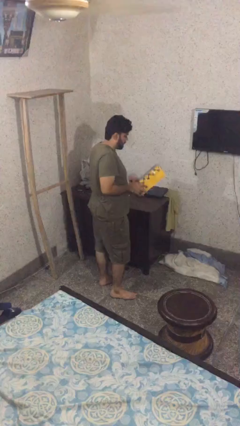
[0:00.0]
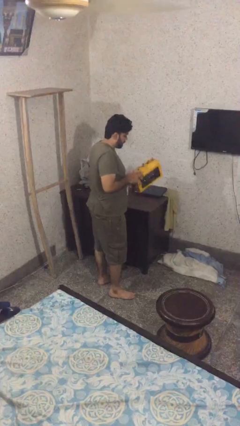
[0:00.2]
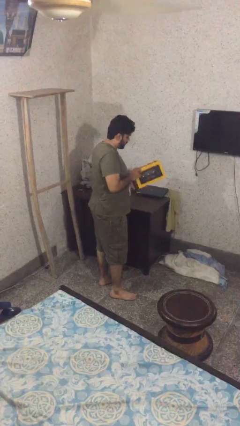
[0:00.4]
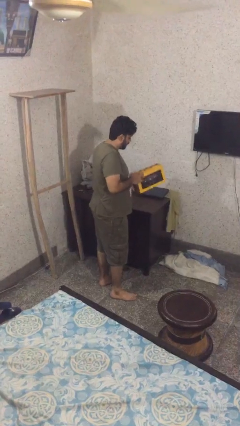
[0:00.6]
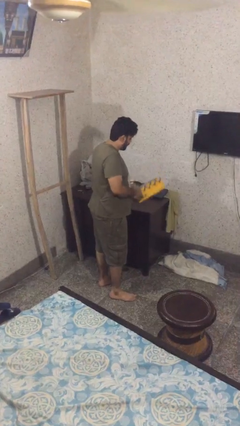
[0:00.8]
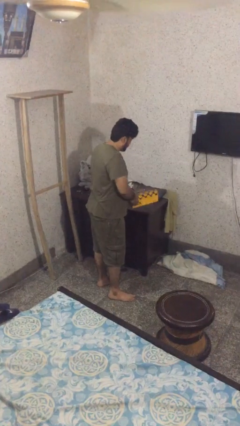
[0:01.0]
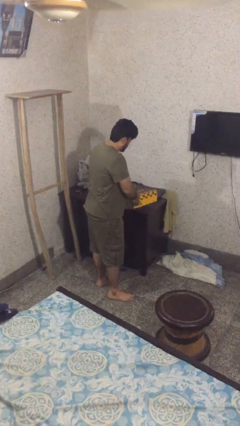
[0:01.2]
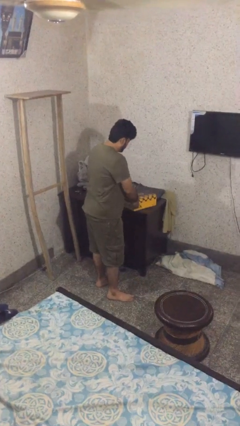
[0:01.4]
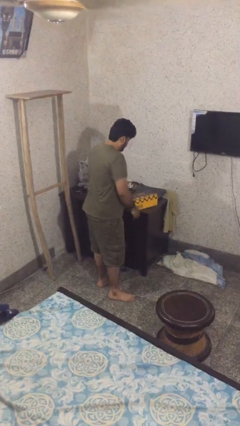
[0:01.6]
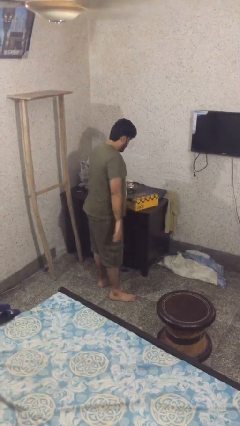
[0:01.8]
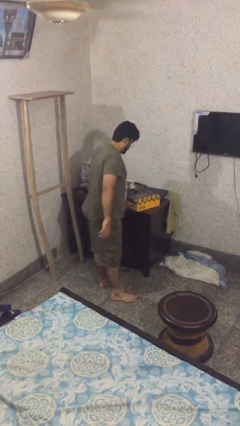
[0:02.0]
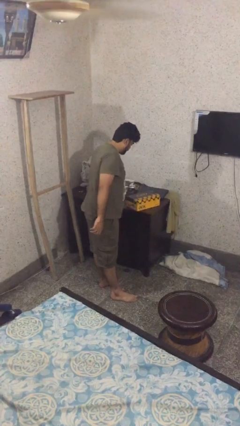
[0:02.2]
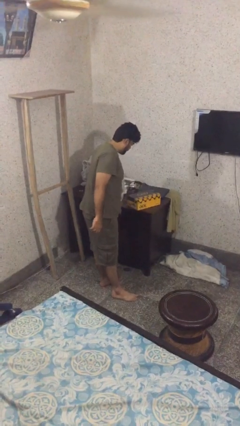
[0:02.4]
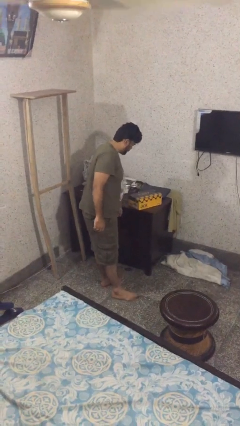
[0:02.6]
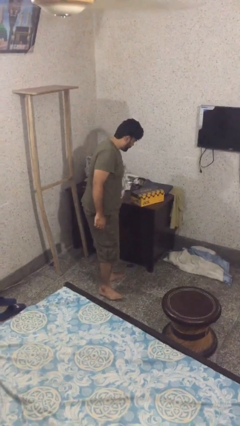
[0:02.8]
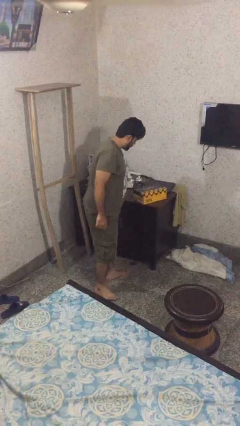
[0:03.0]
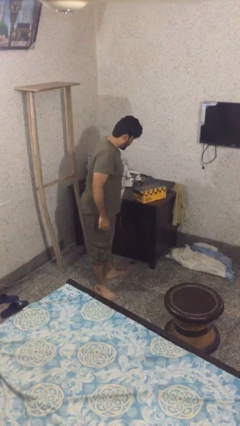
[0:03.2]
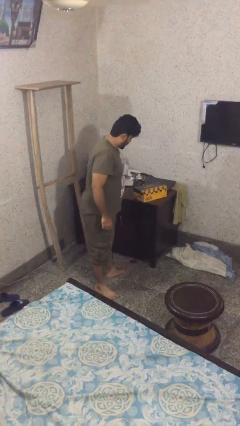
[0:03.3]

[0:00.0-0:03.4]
person puts down object on table

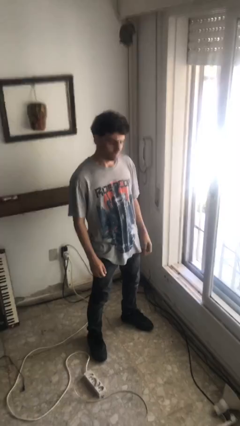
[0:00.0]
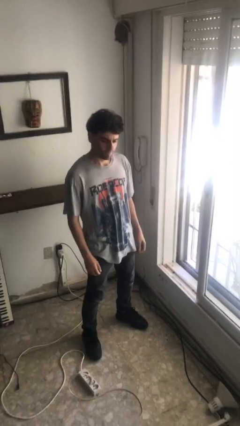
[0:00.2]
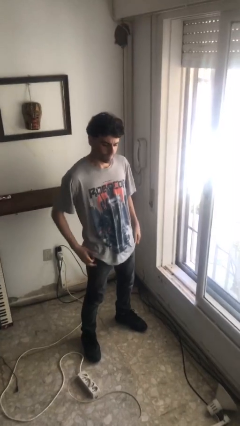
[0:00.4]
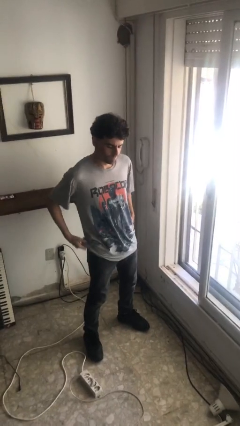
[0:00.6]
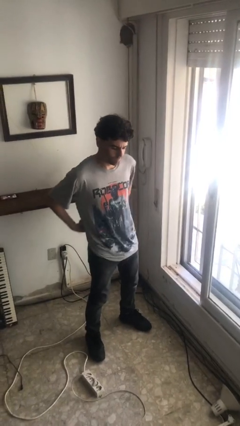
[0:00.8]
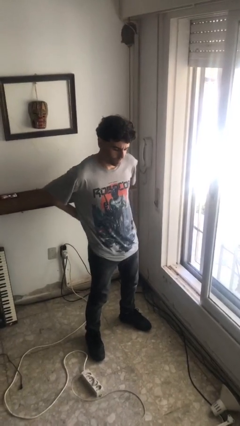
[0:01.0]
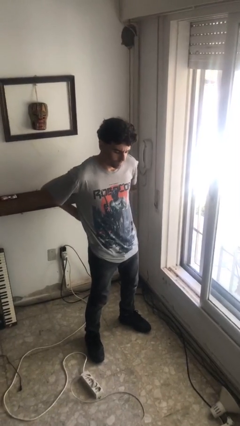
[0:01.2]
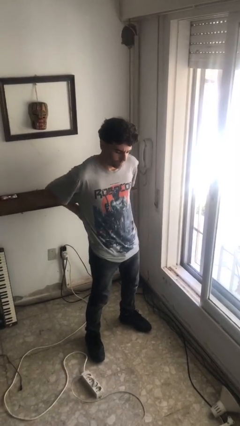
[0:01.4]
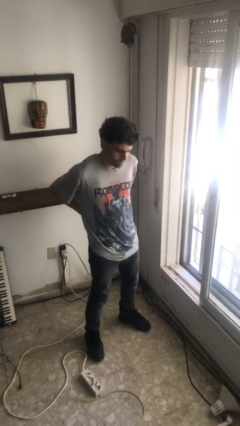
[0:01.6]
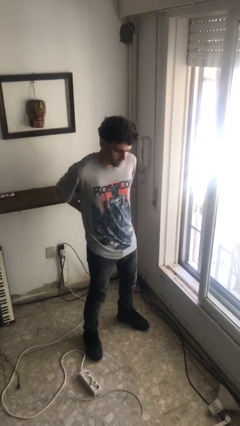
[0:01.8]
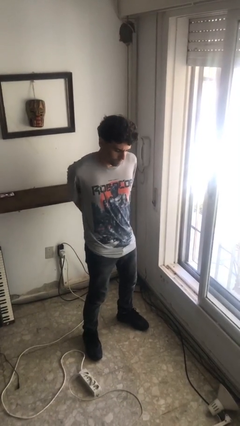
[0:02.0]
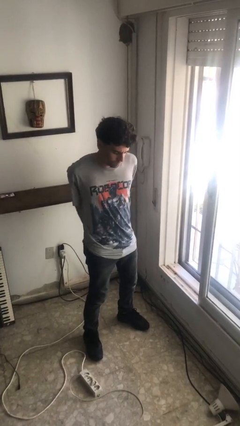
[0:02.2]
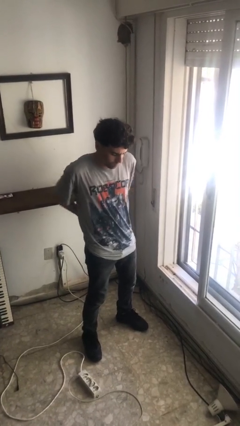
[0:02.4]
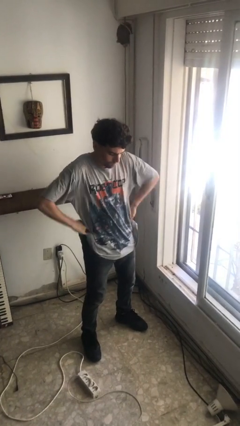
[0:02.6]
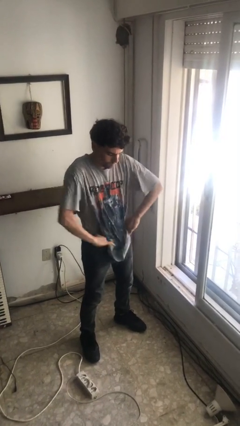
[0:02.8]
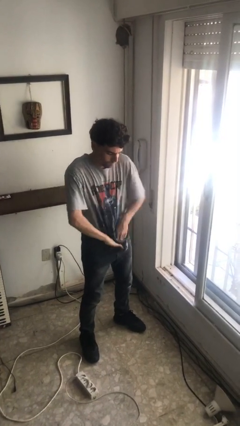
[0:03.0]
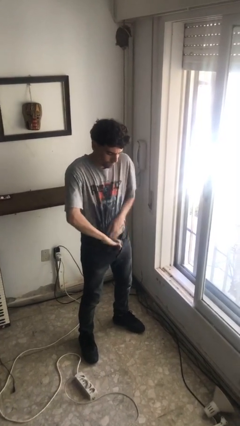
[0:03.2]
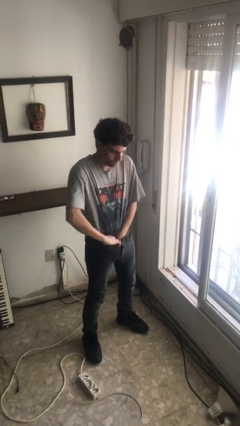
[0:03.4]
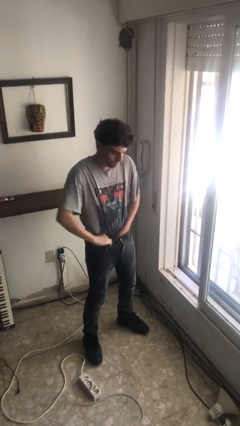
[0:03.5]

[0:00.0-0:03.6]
person tucks in shirt

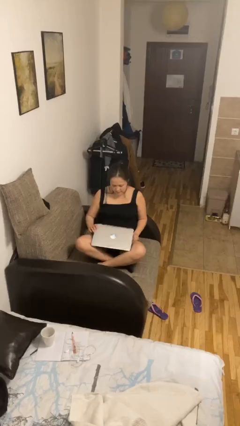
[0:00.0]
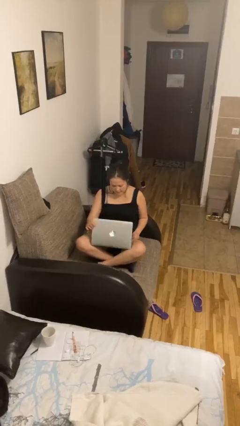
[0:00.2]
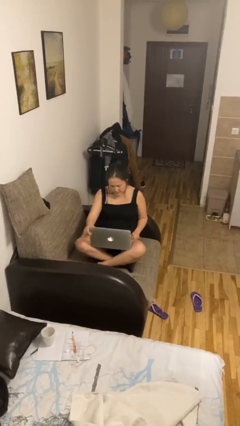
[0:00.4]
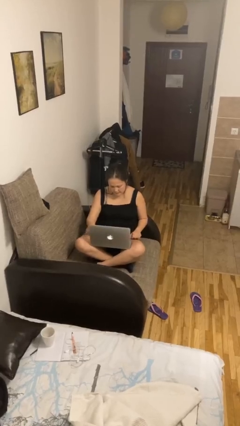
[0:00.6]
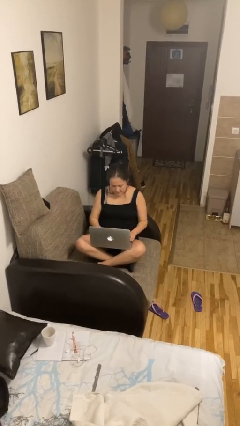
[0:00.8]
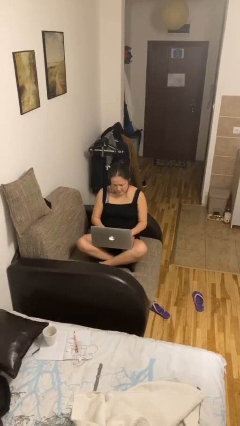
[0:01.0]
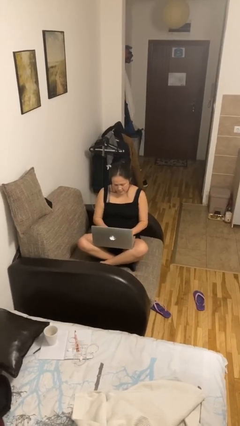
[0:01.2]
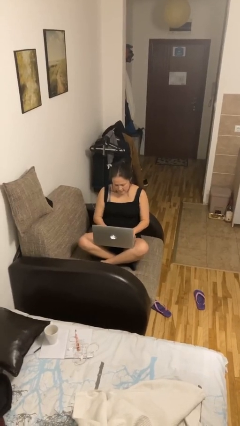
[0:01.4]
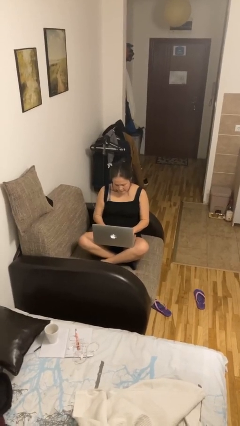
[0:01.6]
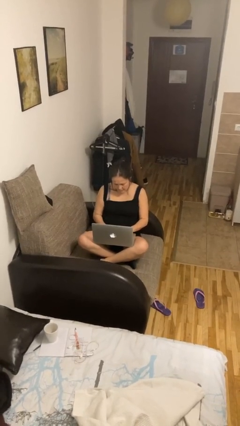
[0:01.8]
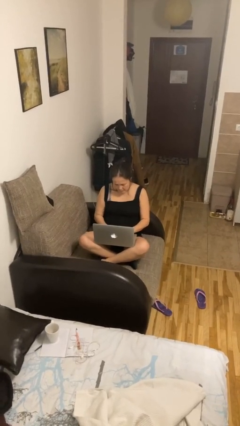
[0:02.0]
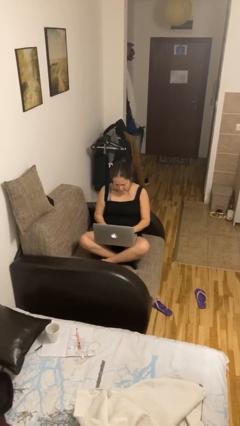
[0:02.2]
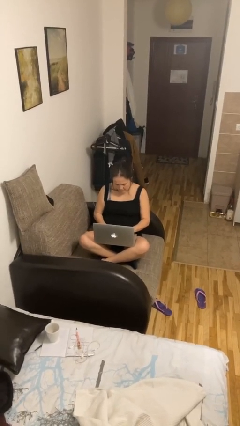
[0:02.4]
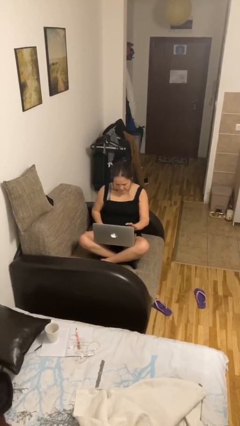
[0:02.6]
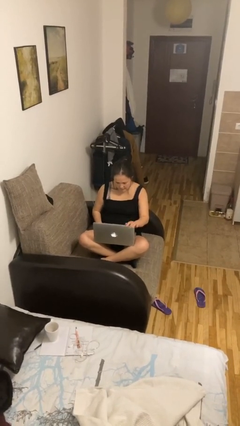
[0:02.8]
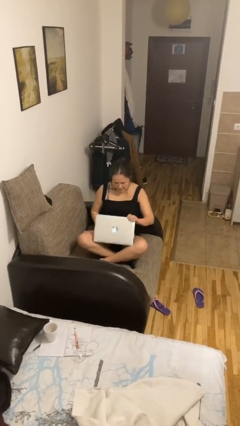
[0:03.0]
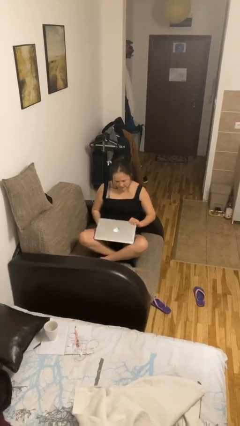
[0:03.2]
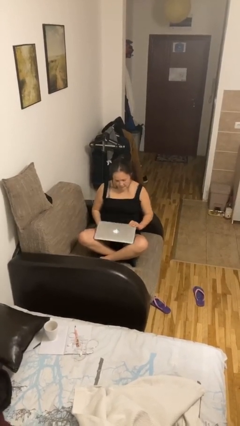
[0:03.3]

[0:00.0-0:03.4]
person interacts with laptop

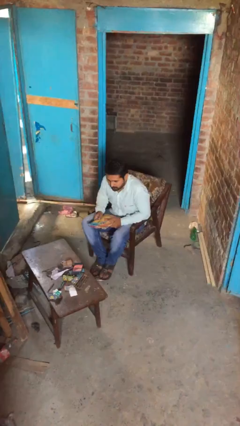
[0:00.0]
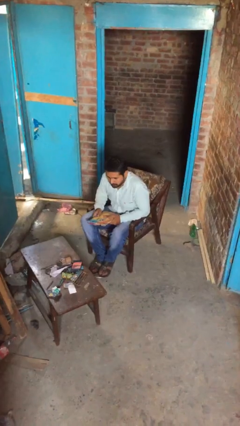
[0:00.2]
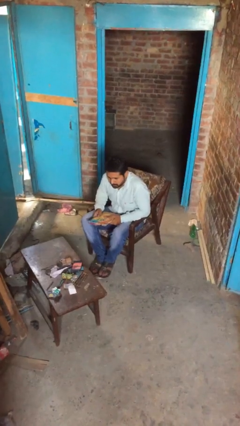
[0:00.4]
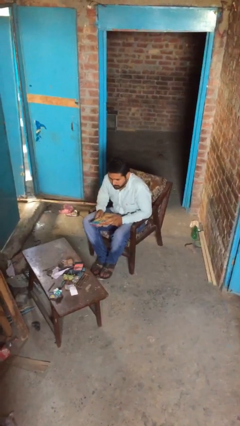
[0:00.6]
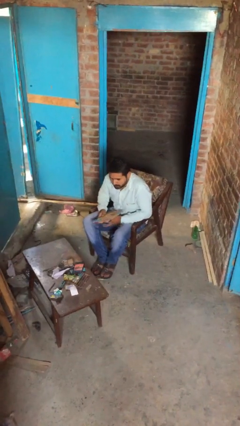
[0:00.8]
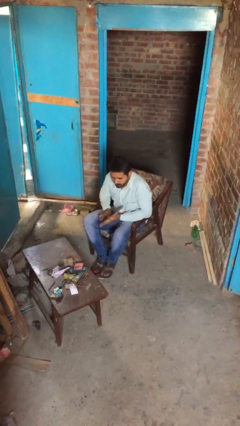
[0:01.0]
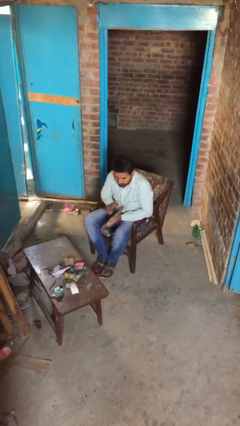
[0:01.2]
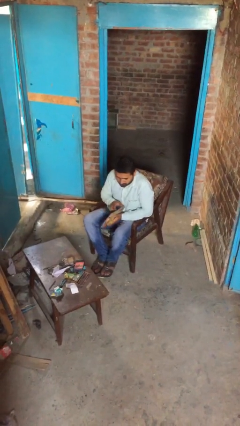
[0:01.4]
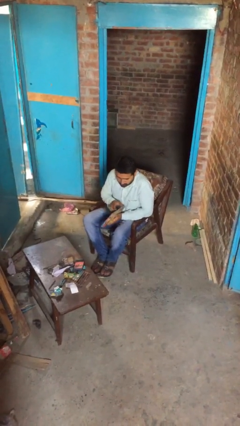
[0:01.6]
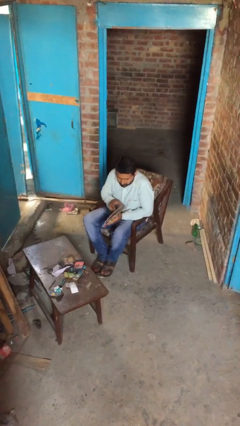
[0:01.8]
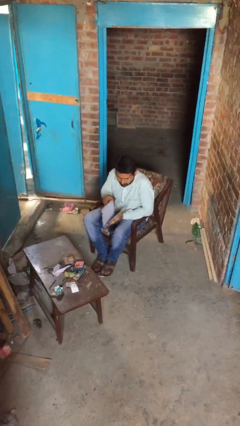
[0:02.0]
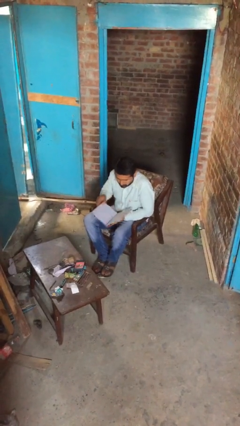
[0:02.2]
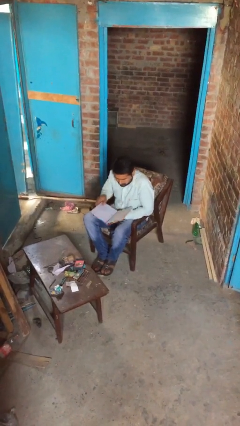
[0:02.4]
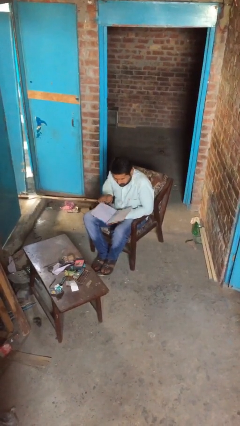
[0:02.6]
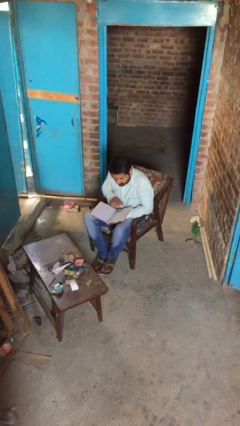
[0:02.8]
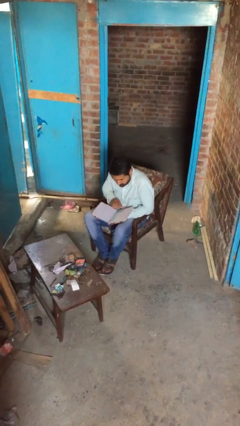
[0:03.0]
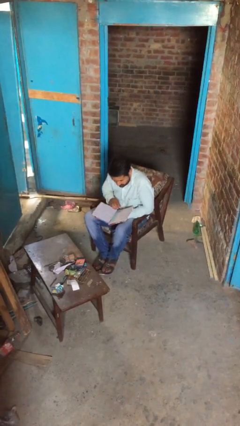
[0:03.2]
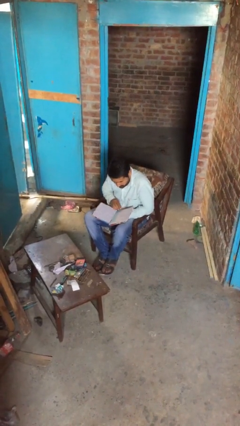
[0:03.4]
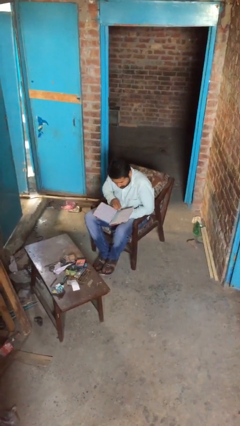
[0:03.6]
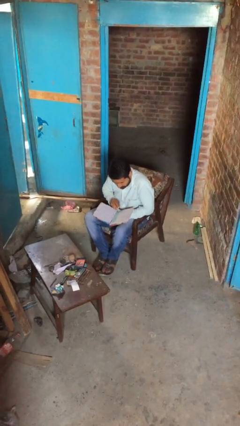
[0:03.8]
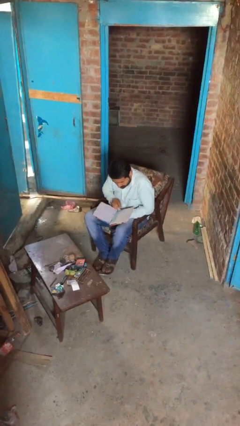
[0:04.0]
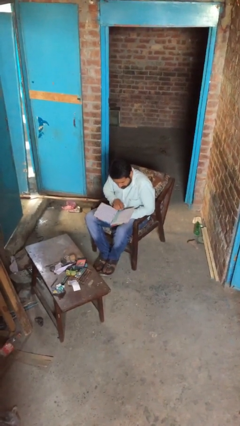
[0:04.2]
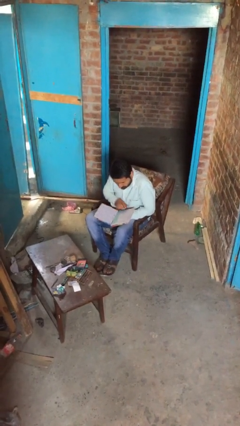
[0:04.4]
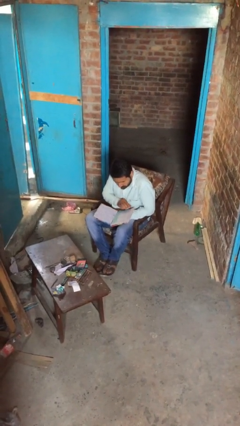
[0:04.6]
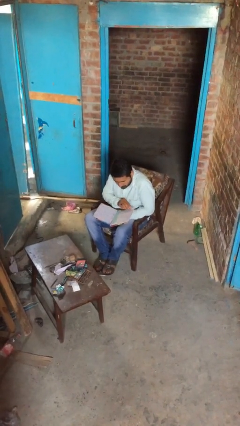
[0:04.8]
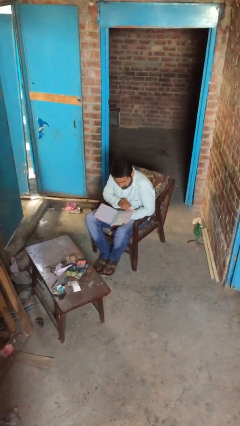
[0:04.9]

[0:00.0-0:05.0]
person reads document

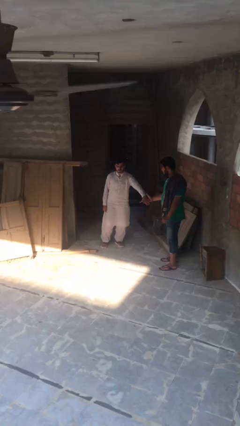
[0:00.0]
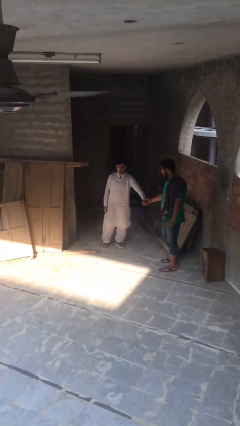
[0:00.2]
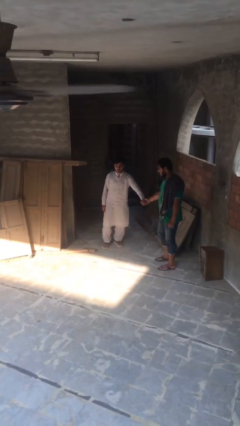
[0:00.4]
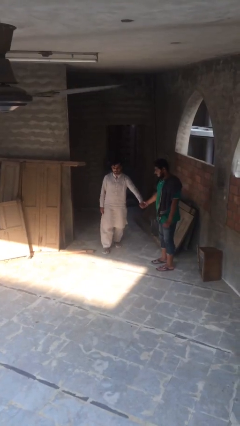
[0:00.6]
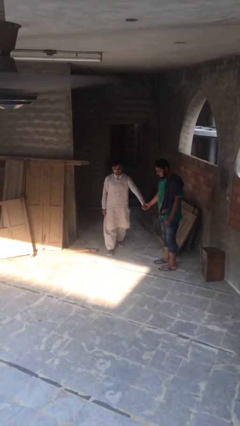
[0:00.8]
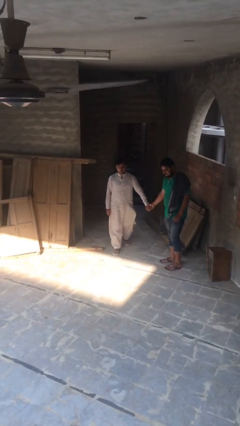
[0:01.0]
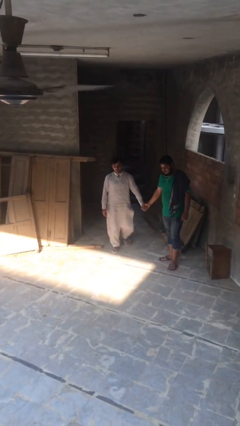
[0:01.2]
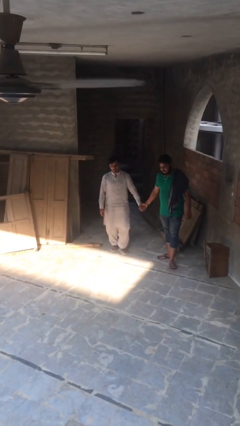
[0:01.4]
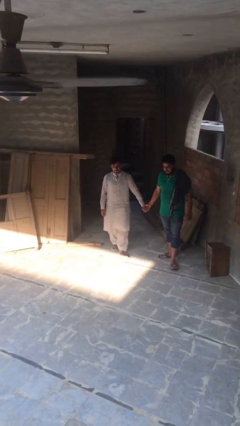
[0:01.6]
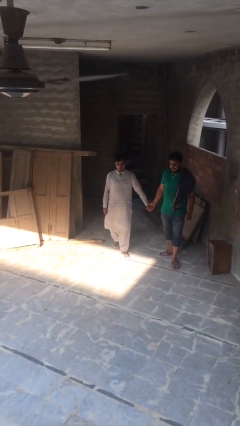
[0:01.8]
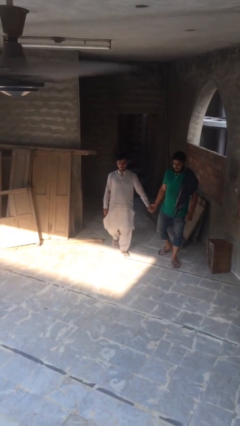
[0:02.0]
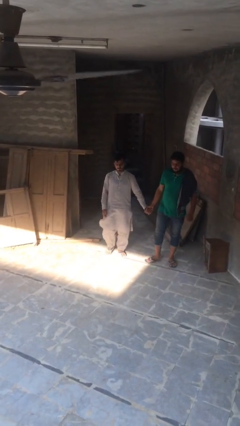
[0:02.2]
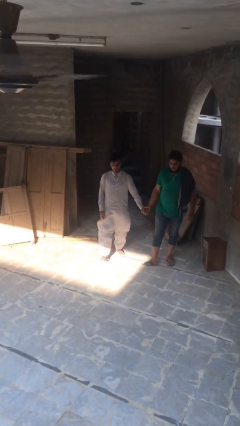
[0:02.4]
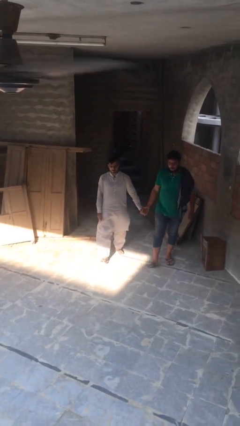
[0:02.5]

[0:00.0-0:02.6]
person holds hand
